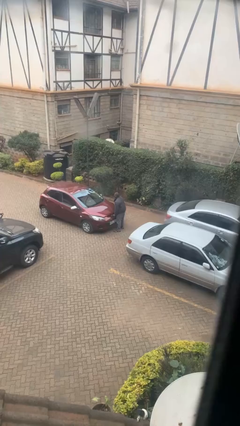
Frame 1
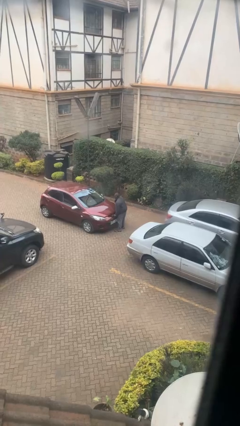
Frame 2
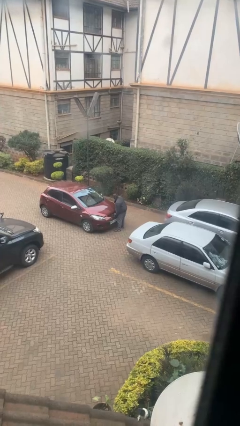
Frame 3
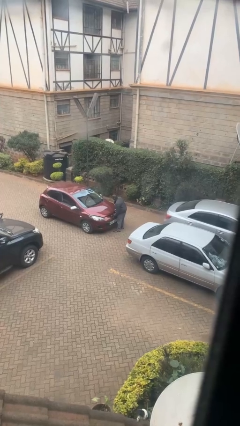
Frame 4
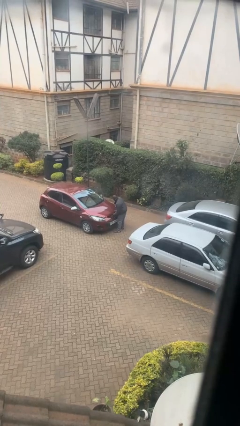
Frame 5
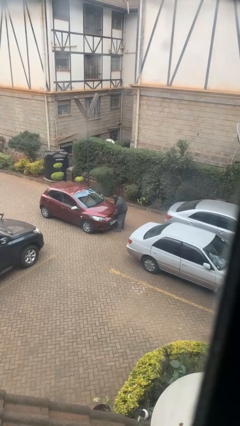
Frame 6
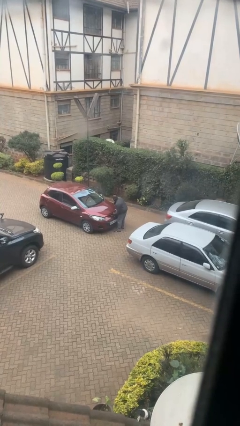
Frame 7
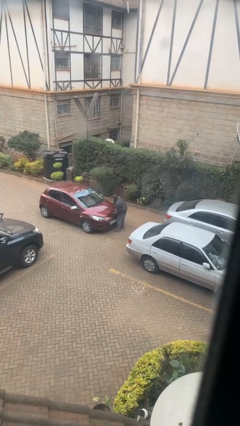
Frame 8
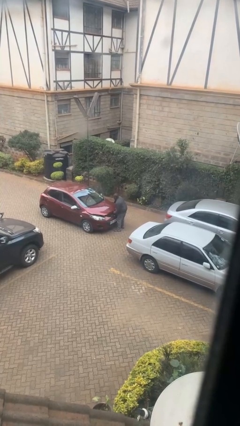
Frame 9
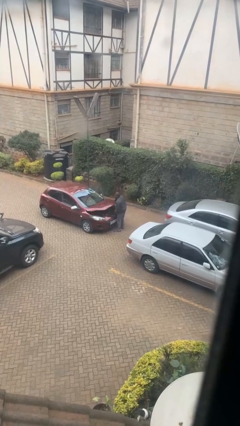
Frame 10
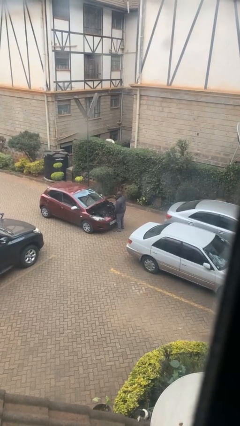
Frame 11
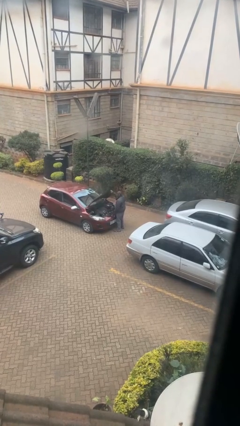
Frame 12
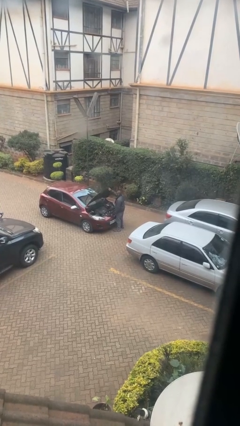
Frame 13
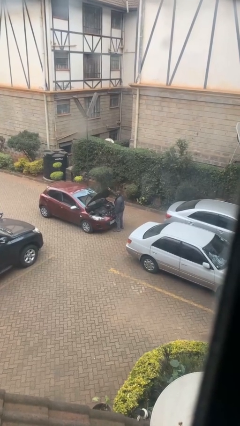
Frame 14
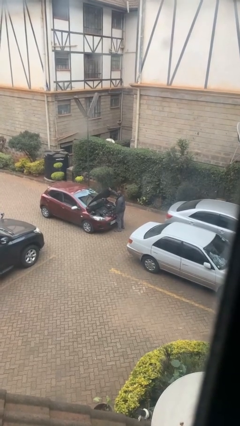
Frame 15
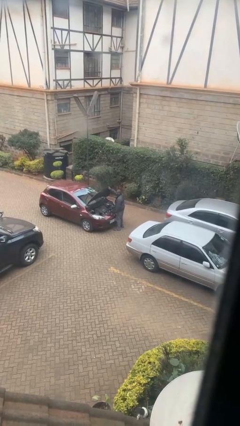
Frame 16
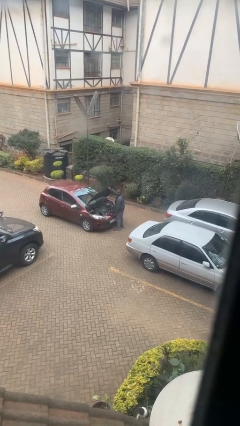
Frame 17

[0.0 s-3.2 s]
person opens car hood

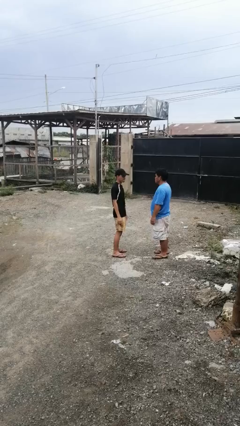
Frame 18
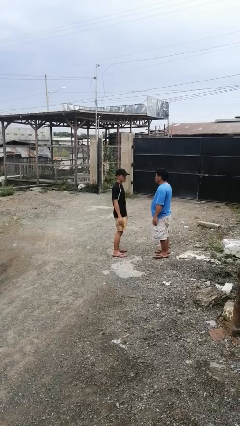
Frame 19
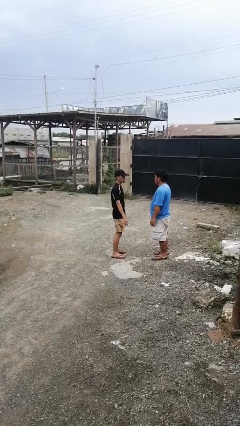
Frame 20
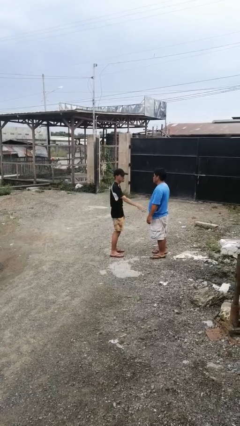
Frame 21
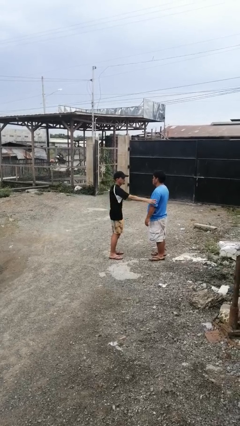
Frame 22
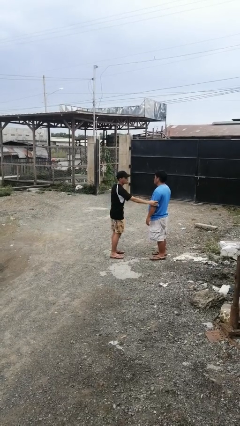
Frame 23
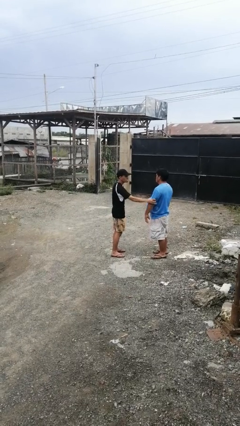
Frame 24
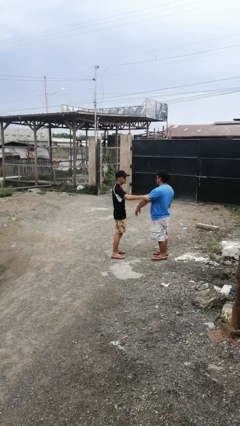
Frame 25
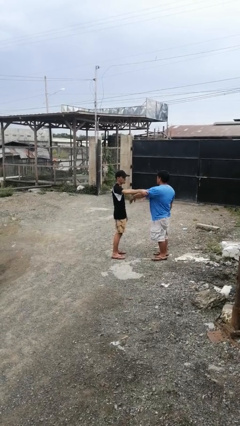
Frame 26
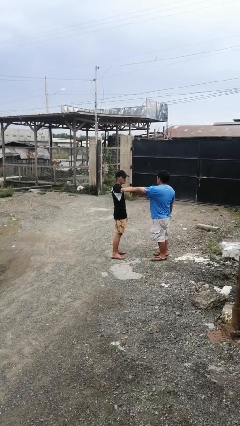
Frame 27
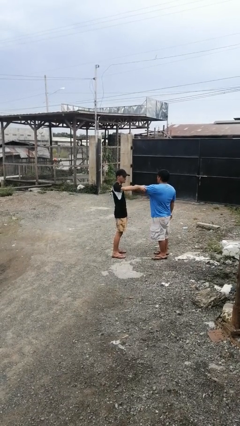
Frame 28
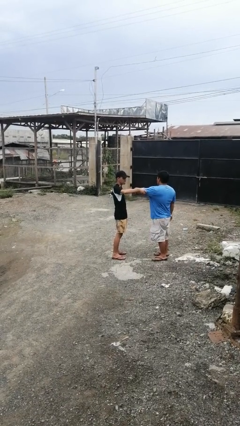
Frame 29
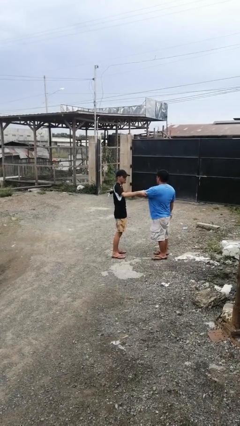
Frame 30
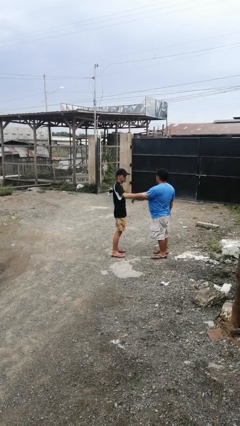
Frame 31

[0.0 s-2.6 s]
person grabs person by bicep

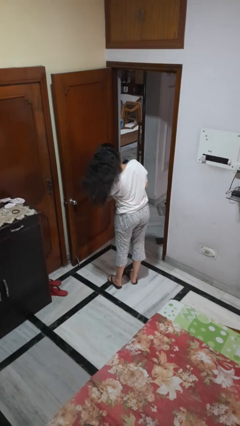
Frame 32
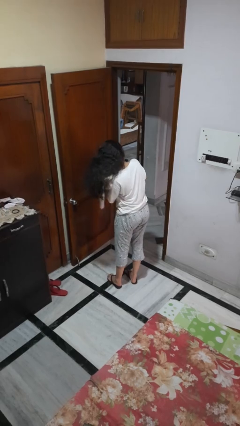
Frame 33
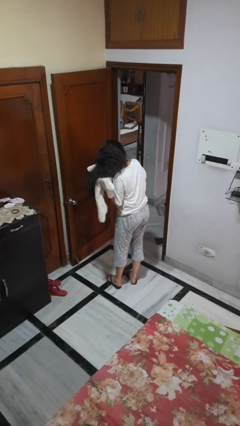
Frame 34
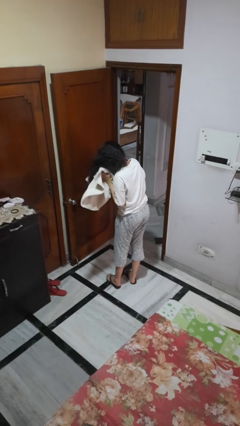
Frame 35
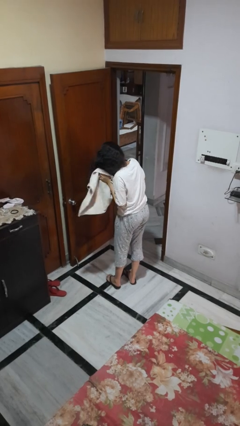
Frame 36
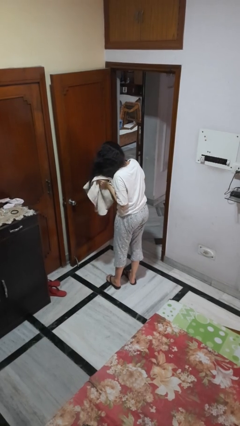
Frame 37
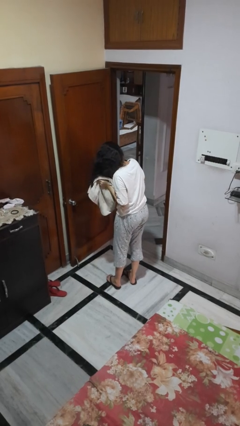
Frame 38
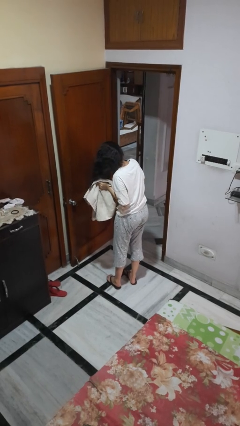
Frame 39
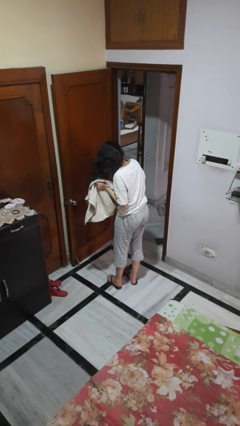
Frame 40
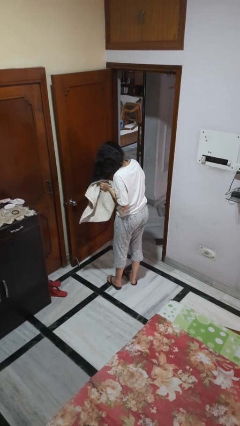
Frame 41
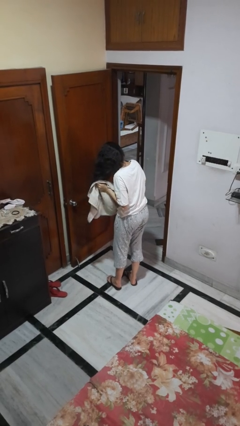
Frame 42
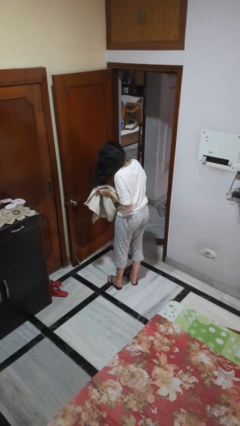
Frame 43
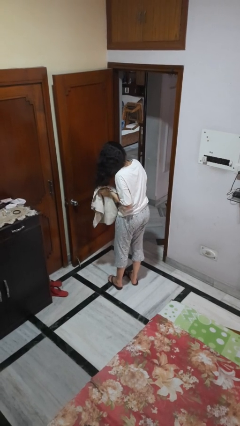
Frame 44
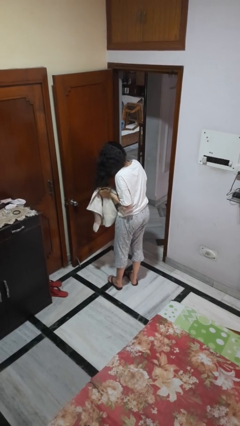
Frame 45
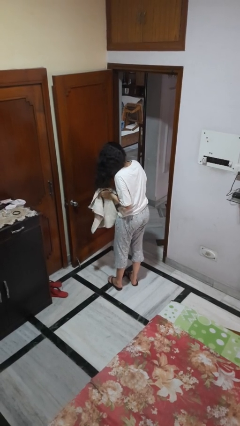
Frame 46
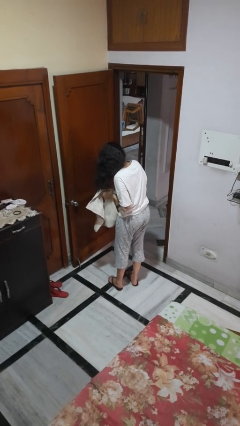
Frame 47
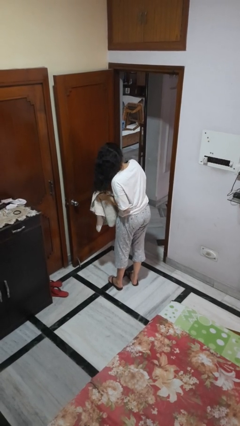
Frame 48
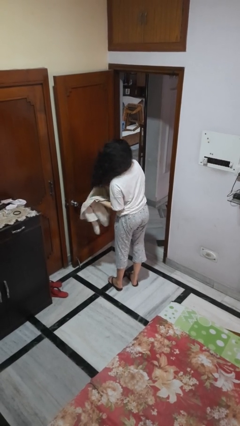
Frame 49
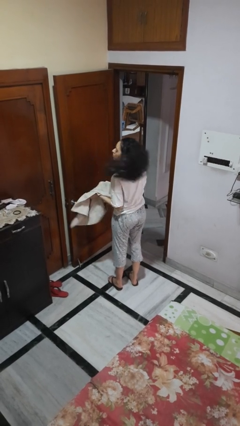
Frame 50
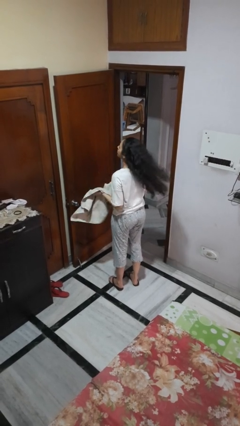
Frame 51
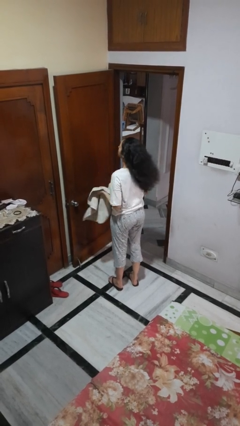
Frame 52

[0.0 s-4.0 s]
person dries hair with towel

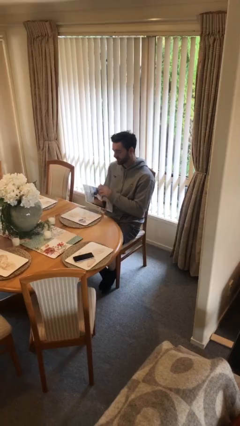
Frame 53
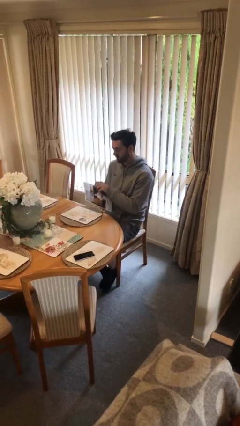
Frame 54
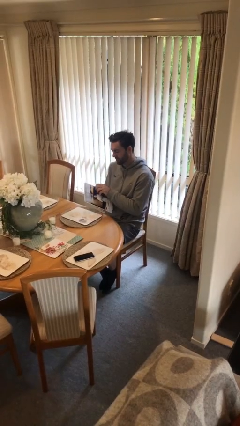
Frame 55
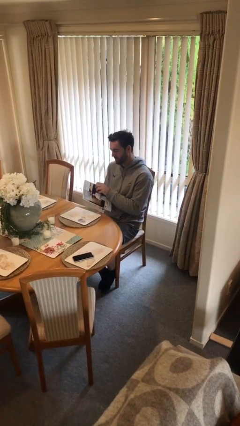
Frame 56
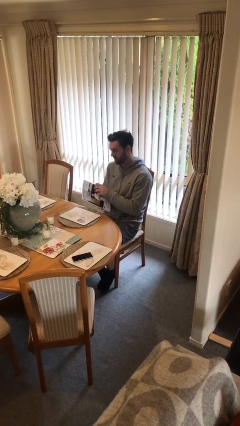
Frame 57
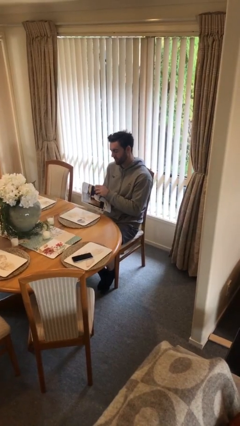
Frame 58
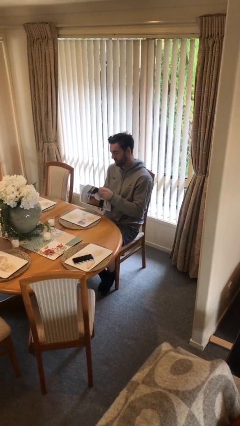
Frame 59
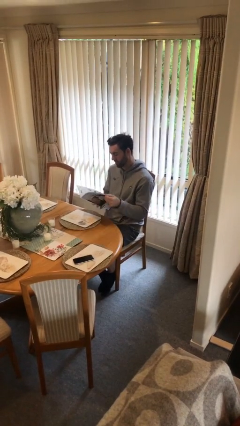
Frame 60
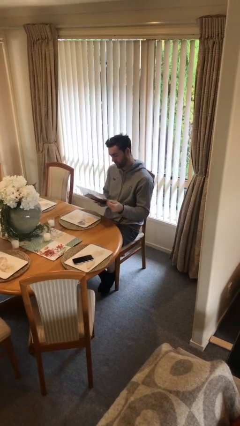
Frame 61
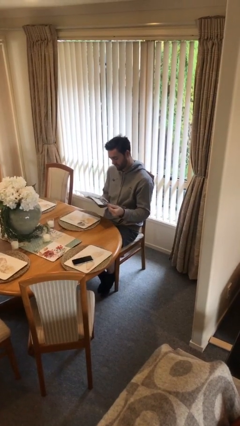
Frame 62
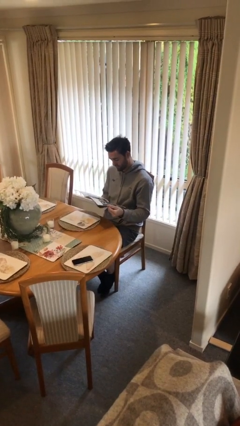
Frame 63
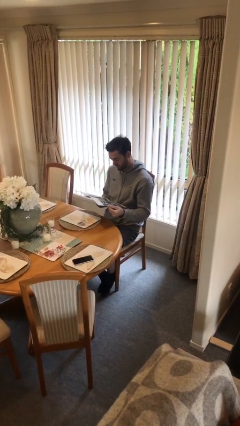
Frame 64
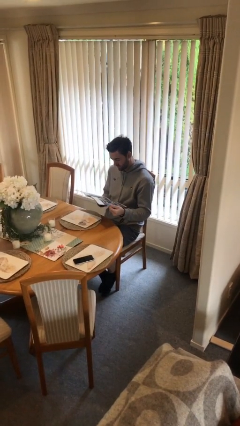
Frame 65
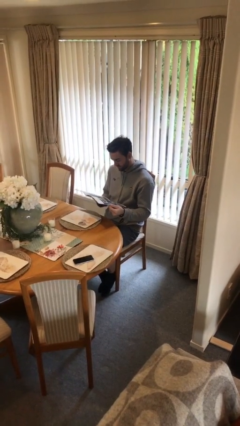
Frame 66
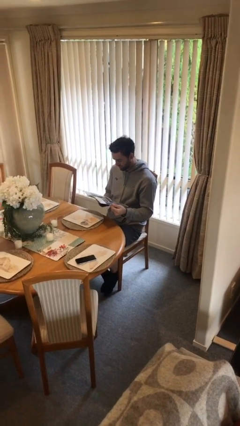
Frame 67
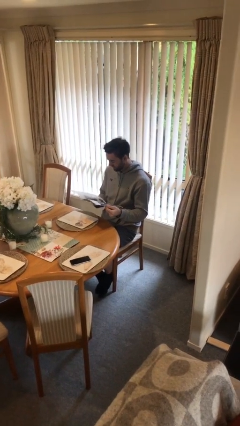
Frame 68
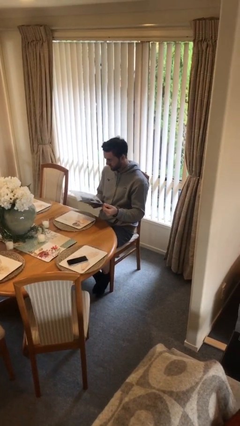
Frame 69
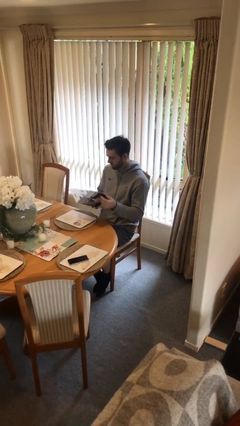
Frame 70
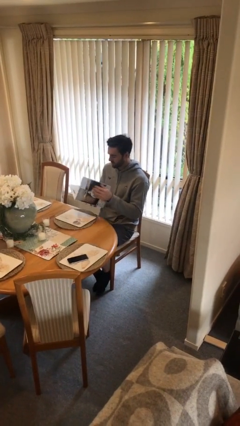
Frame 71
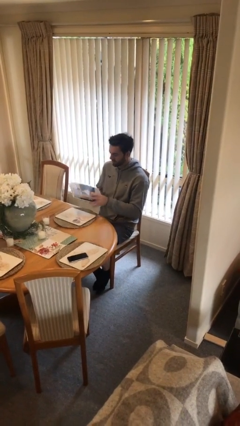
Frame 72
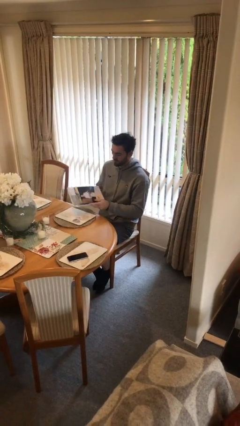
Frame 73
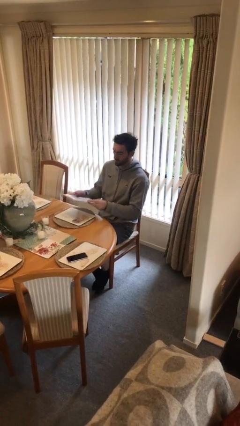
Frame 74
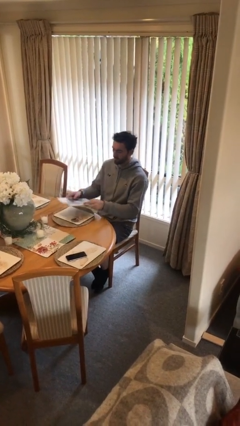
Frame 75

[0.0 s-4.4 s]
person reads document

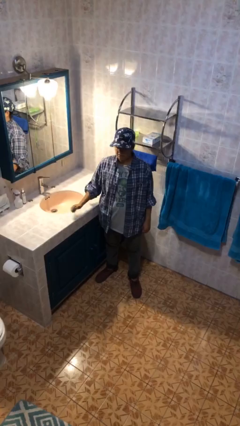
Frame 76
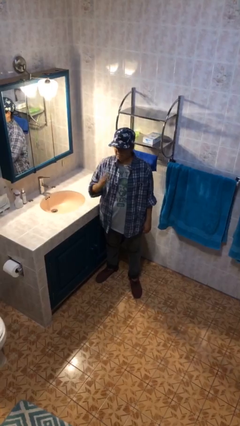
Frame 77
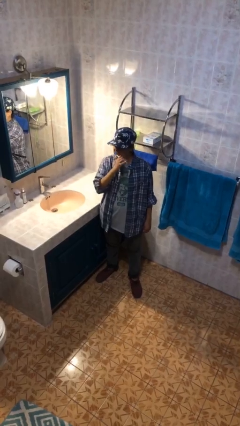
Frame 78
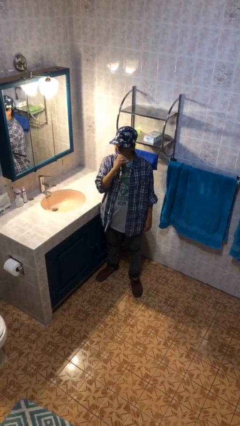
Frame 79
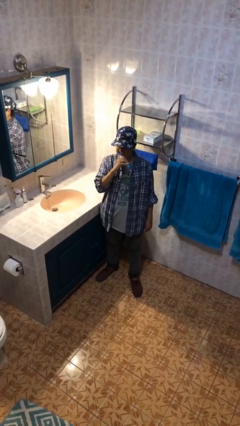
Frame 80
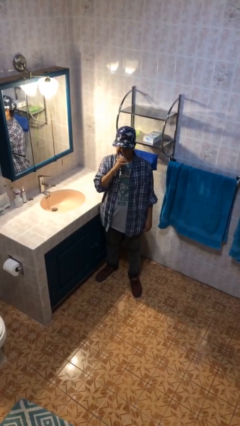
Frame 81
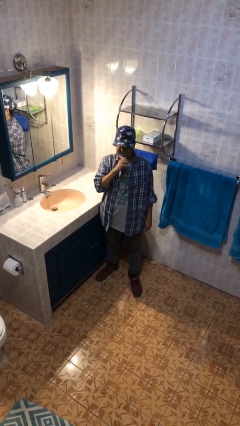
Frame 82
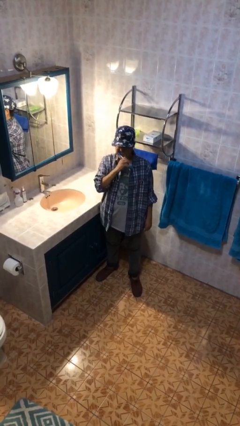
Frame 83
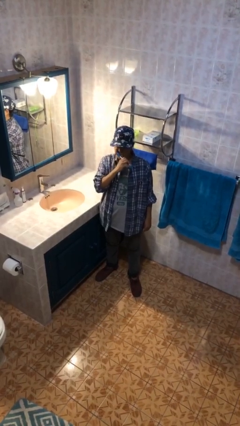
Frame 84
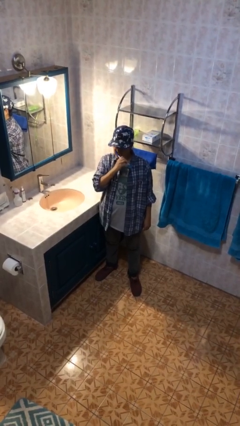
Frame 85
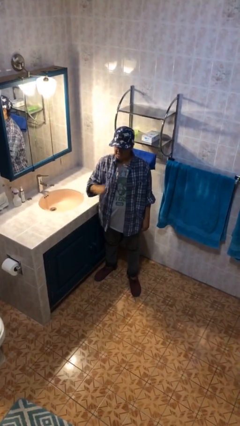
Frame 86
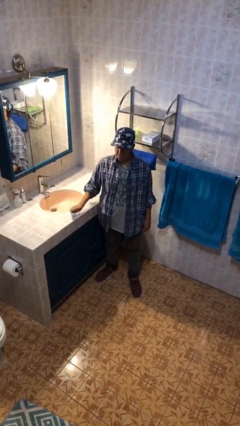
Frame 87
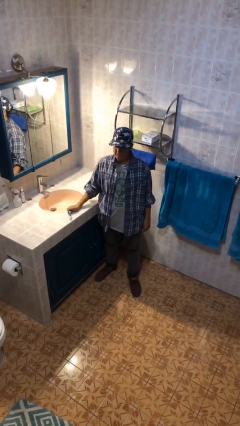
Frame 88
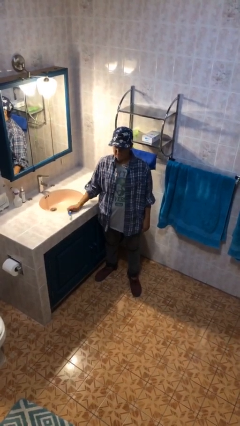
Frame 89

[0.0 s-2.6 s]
person brushes teeth

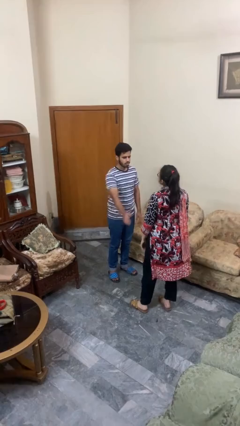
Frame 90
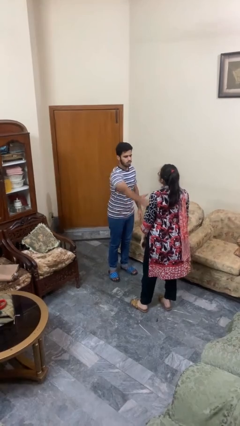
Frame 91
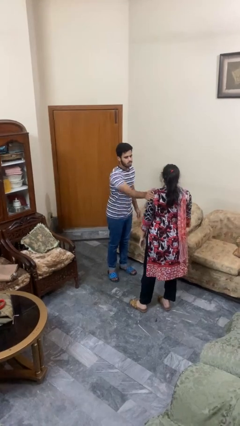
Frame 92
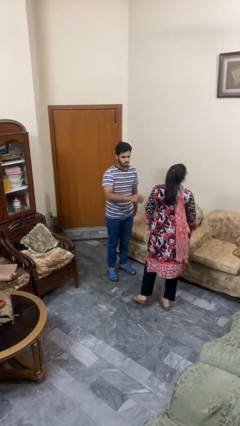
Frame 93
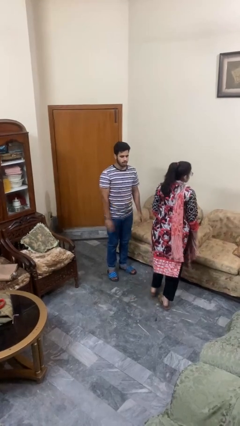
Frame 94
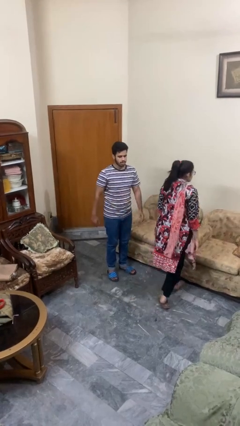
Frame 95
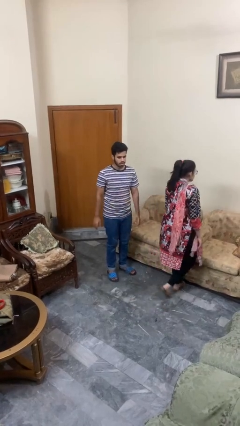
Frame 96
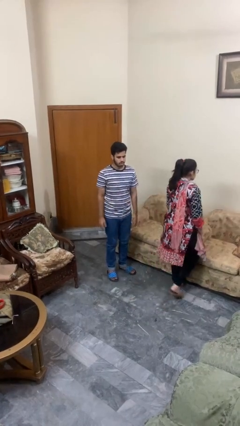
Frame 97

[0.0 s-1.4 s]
person shoves person
